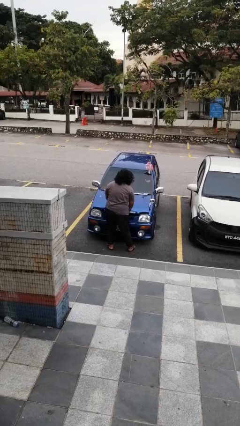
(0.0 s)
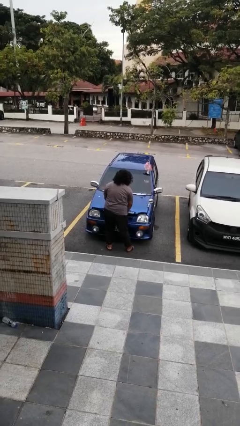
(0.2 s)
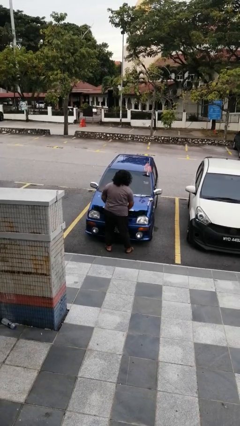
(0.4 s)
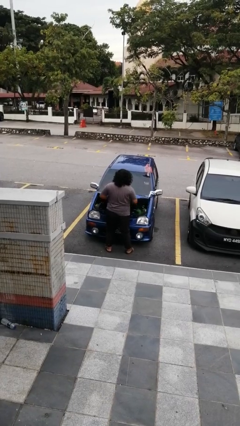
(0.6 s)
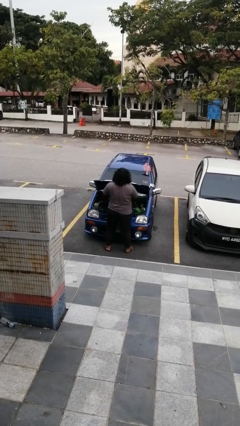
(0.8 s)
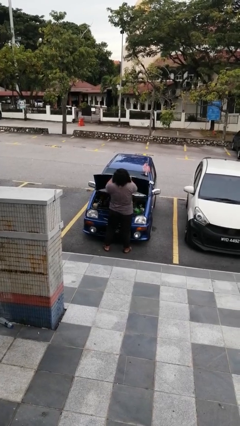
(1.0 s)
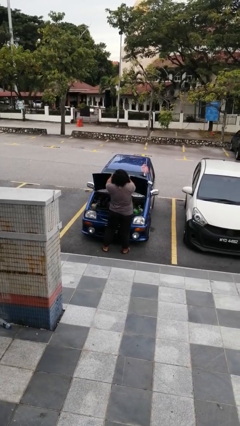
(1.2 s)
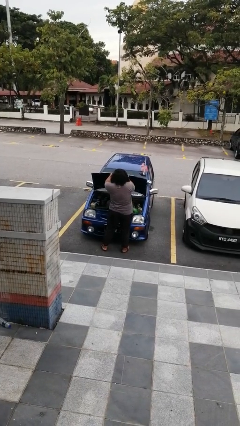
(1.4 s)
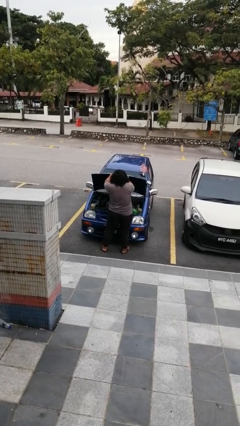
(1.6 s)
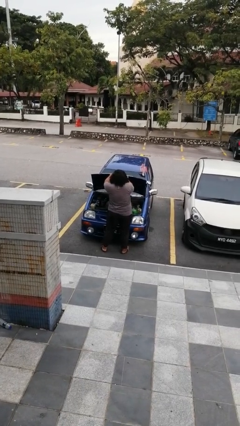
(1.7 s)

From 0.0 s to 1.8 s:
person opens car hood

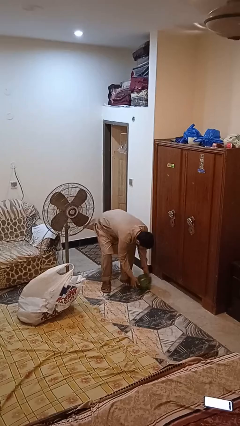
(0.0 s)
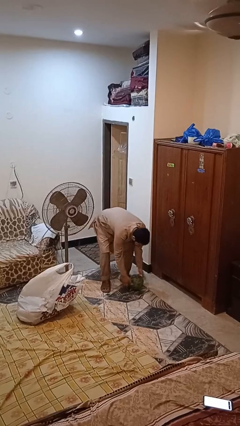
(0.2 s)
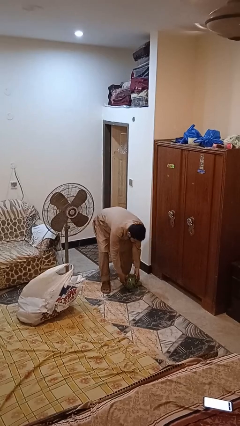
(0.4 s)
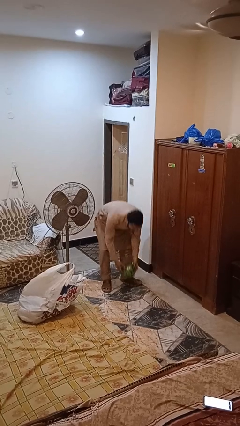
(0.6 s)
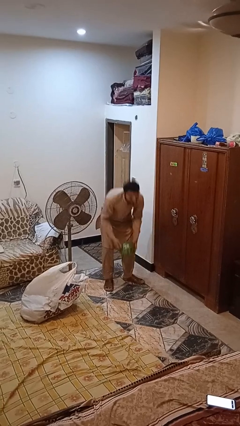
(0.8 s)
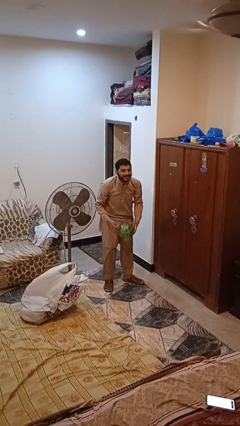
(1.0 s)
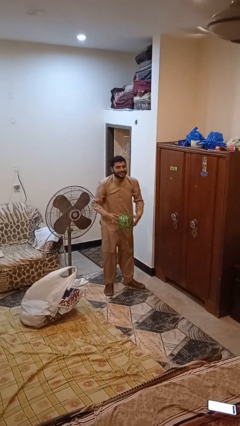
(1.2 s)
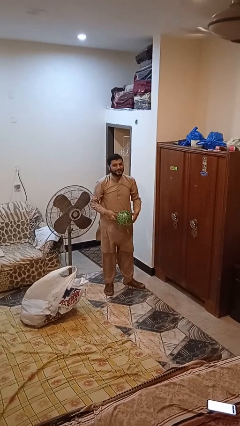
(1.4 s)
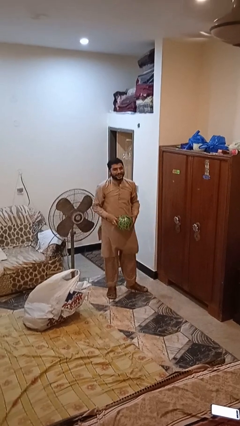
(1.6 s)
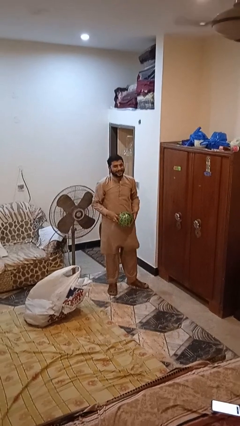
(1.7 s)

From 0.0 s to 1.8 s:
person picks up object from floor

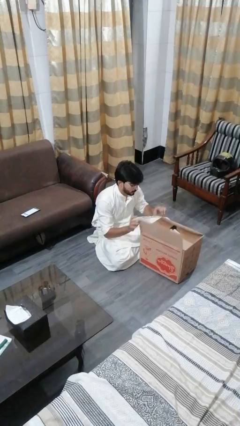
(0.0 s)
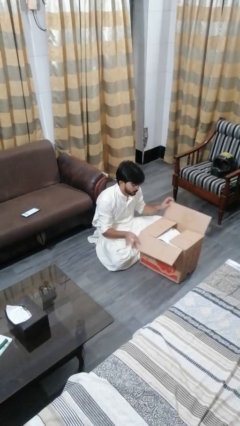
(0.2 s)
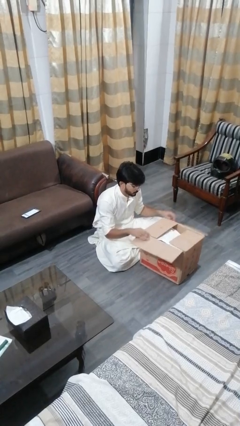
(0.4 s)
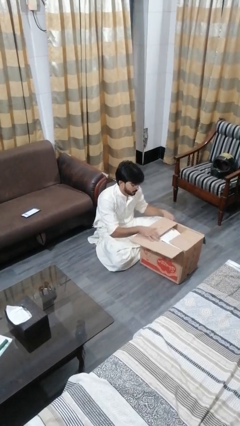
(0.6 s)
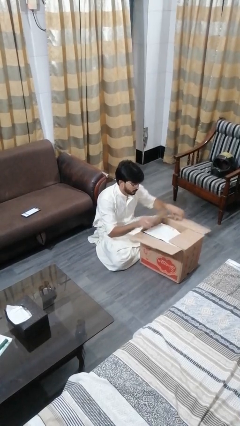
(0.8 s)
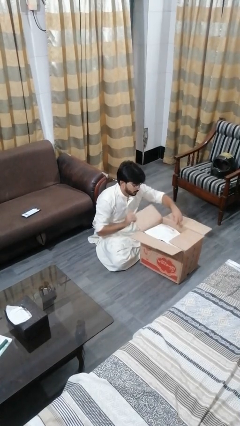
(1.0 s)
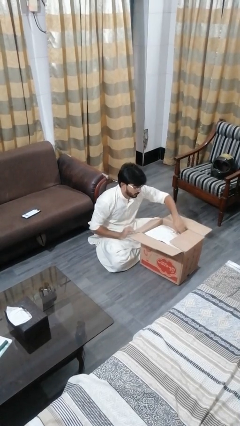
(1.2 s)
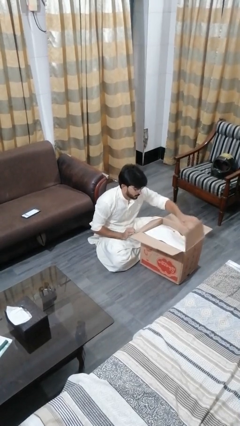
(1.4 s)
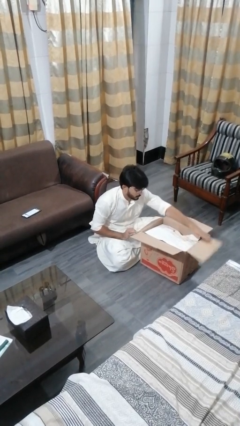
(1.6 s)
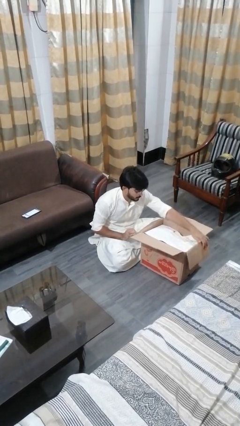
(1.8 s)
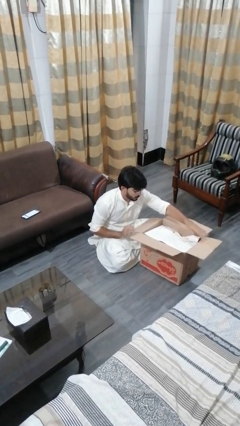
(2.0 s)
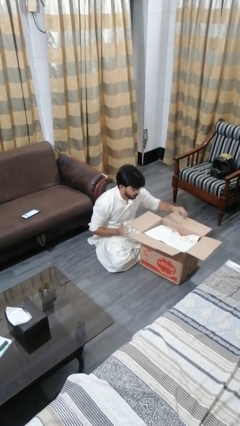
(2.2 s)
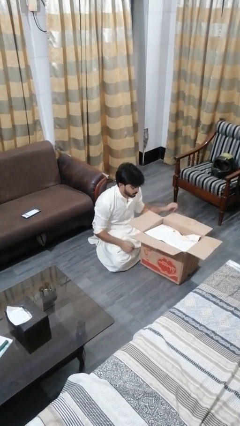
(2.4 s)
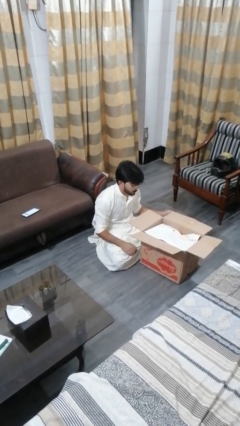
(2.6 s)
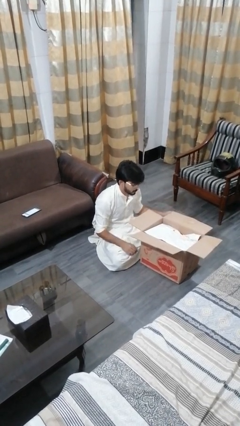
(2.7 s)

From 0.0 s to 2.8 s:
person opens box

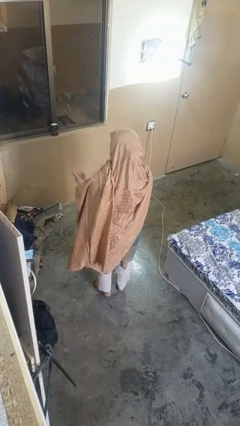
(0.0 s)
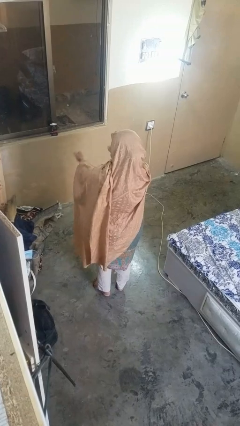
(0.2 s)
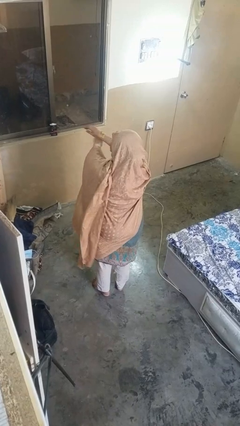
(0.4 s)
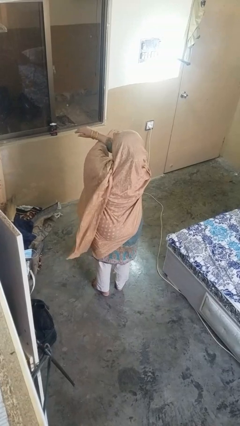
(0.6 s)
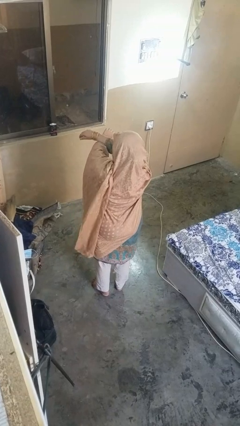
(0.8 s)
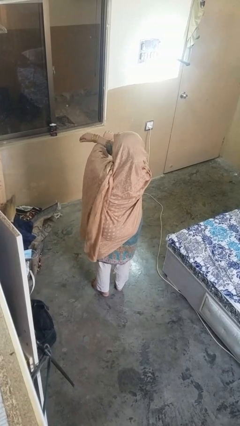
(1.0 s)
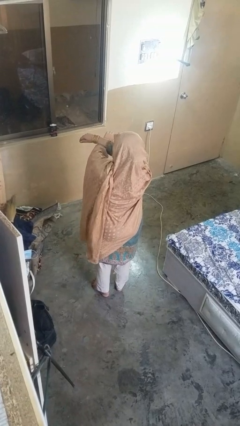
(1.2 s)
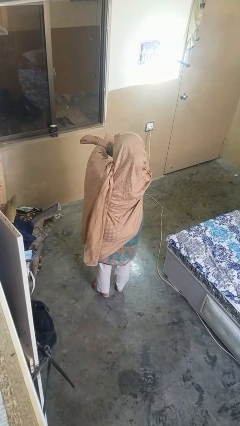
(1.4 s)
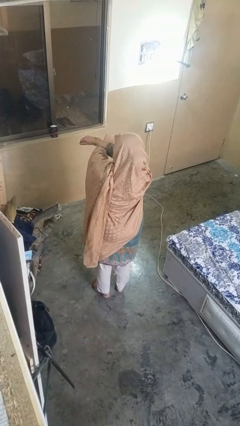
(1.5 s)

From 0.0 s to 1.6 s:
person crosses arms

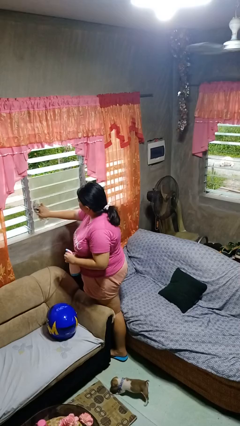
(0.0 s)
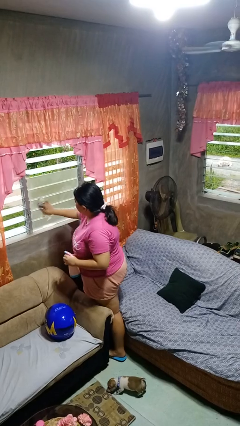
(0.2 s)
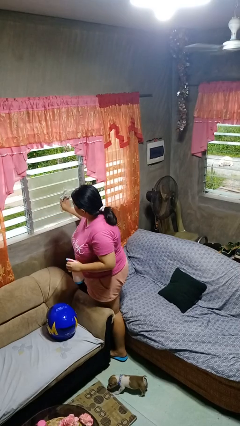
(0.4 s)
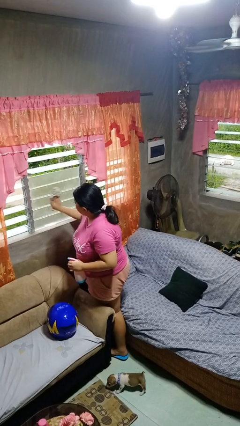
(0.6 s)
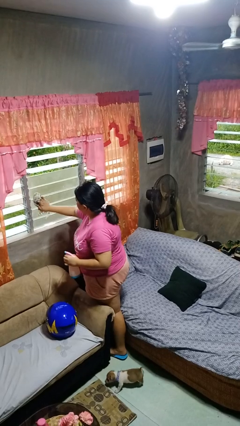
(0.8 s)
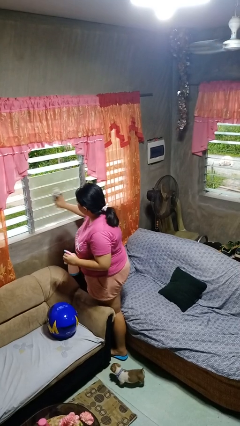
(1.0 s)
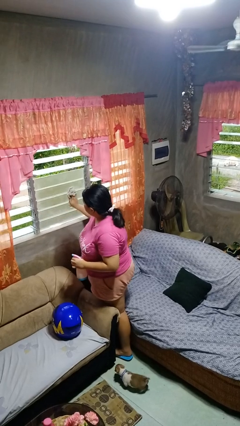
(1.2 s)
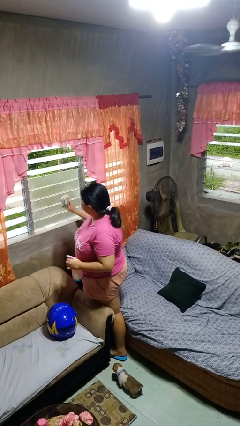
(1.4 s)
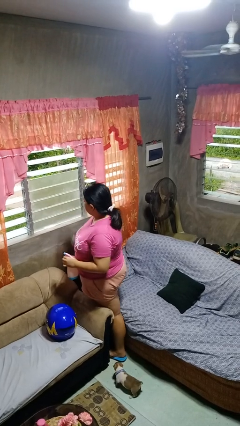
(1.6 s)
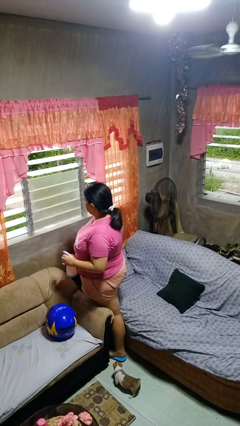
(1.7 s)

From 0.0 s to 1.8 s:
person washes window

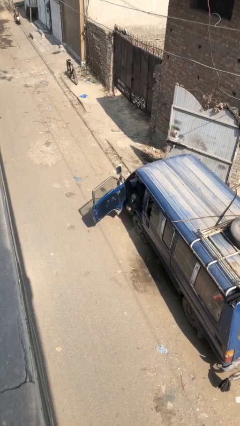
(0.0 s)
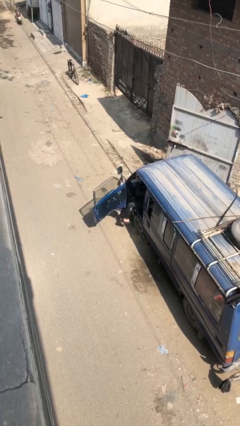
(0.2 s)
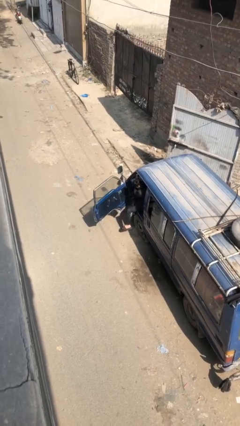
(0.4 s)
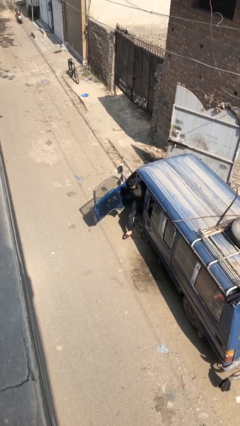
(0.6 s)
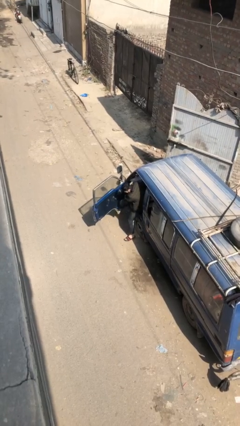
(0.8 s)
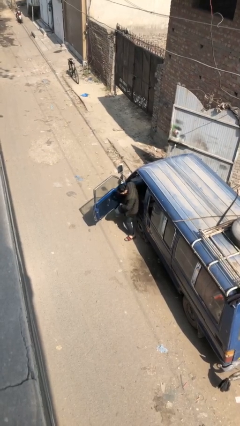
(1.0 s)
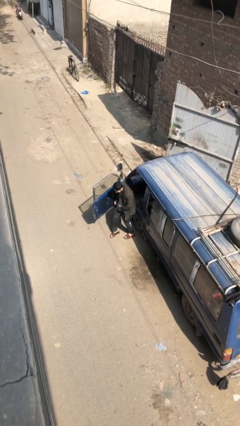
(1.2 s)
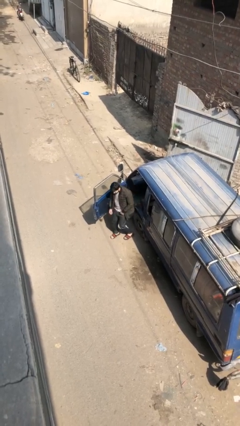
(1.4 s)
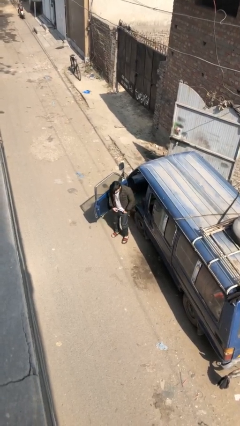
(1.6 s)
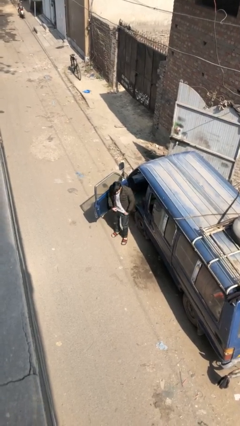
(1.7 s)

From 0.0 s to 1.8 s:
person exits car

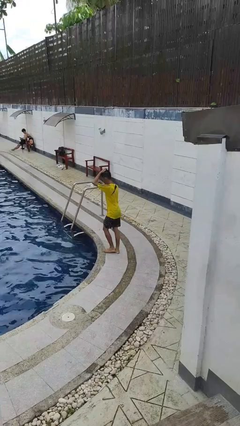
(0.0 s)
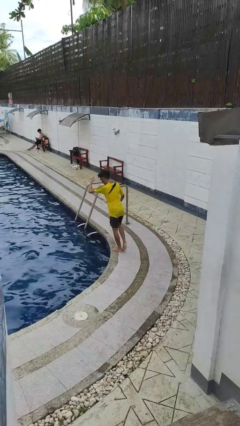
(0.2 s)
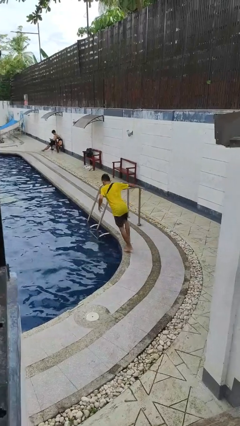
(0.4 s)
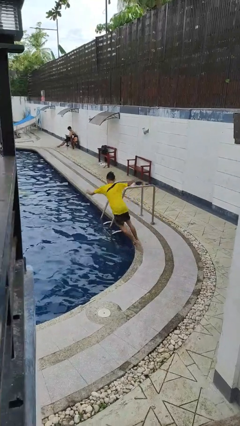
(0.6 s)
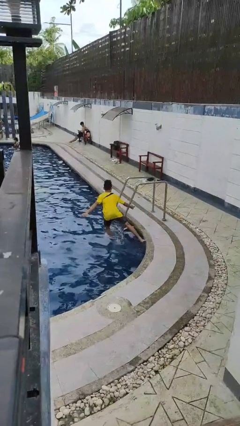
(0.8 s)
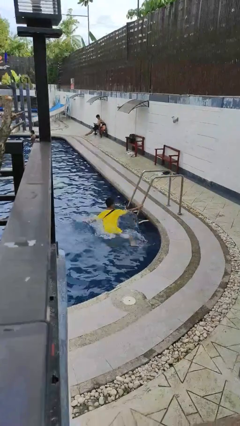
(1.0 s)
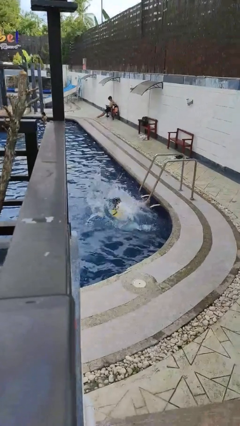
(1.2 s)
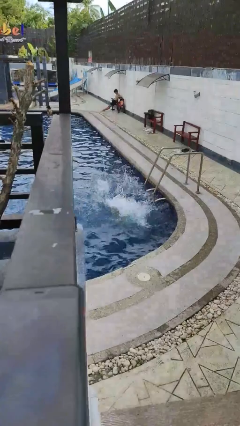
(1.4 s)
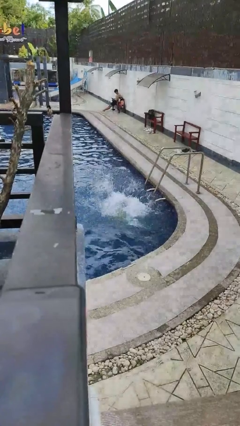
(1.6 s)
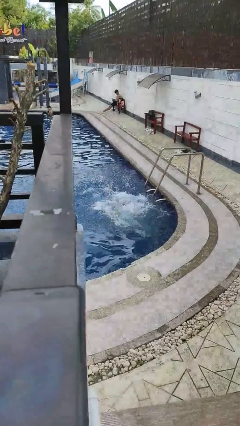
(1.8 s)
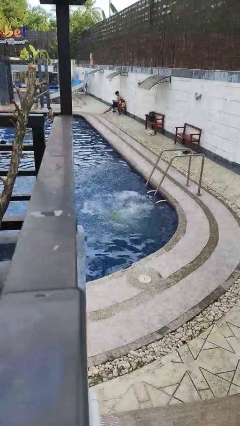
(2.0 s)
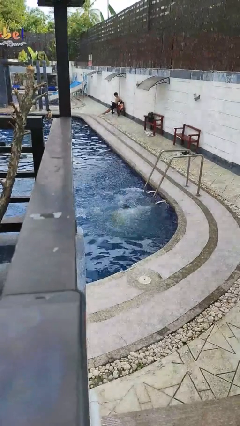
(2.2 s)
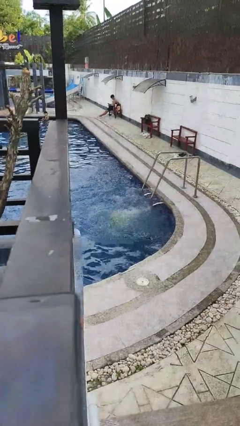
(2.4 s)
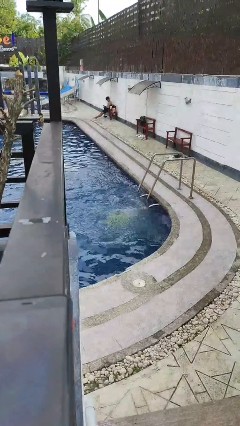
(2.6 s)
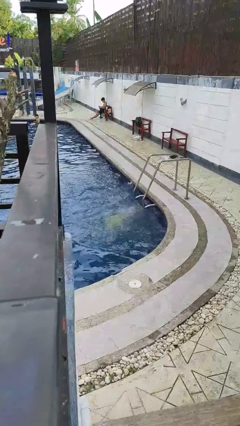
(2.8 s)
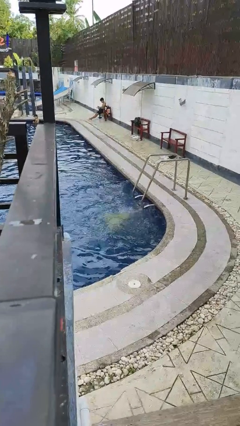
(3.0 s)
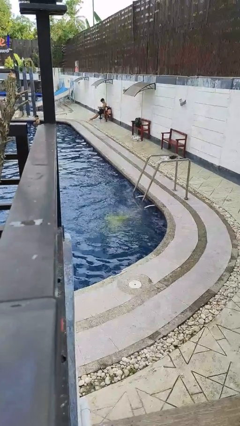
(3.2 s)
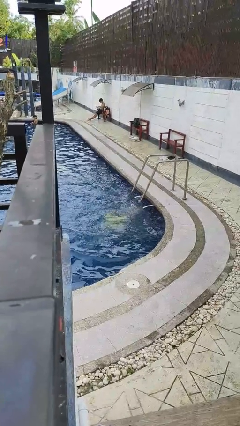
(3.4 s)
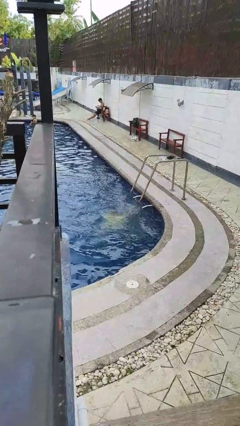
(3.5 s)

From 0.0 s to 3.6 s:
person falls into pool

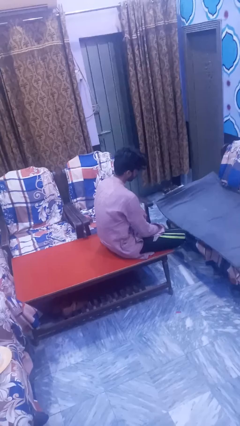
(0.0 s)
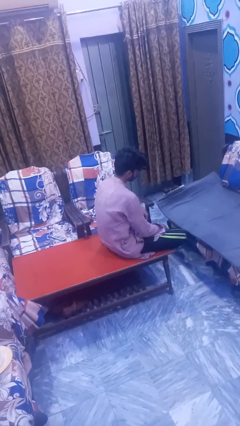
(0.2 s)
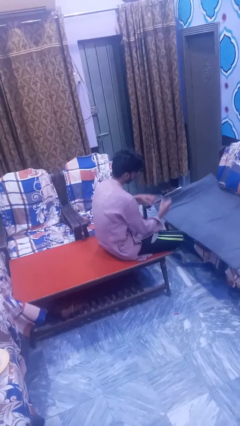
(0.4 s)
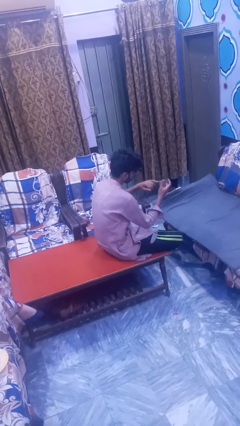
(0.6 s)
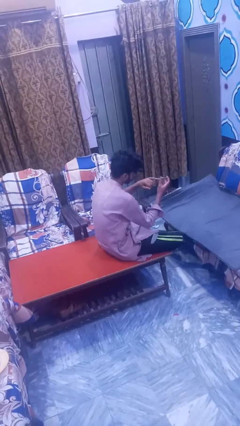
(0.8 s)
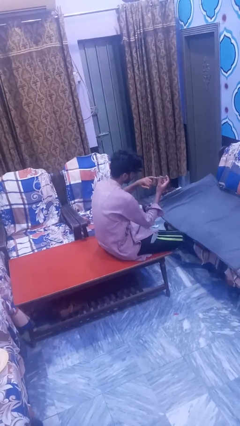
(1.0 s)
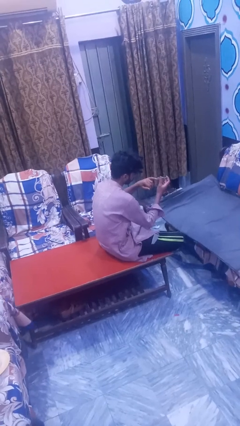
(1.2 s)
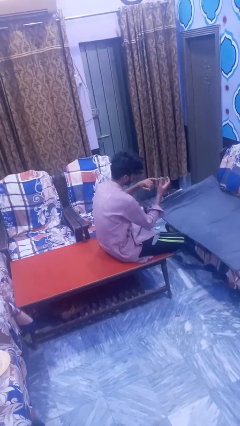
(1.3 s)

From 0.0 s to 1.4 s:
person clips fingernails
